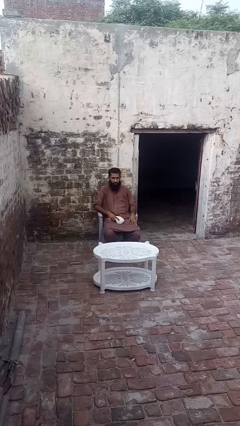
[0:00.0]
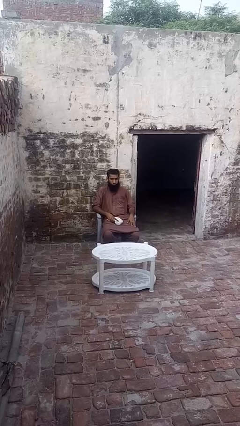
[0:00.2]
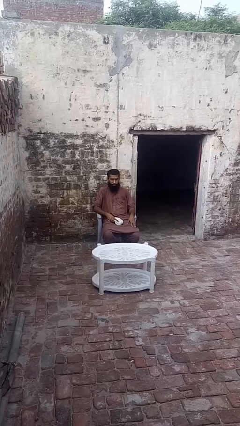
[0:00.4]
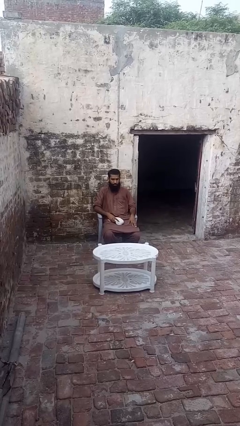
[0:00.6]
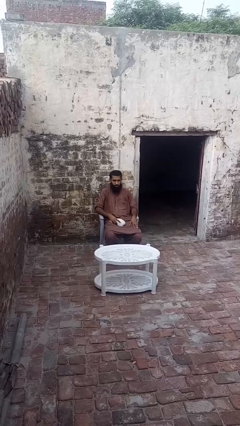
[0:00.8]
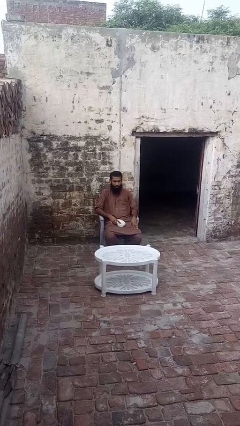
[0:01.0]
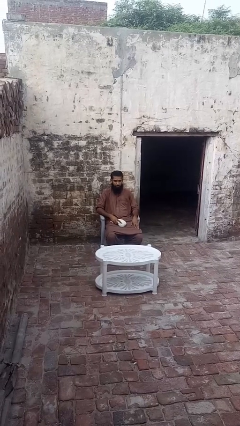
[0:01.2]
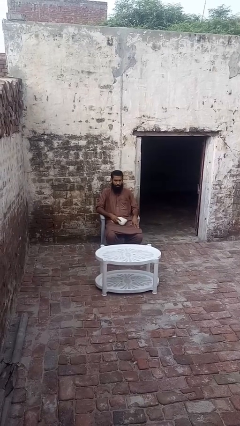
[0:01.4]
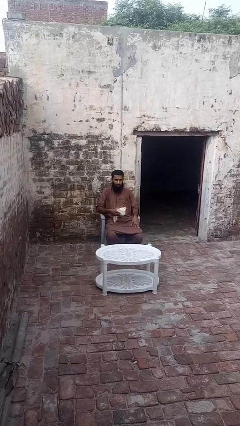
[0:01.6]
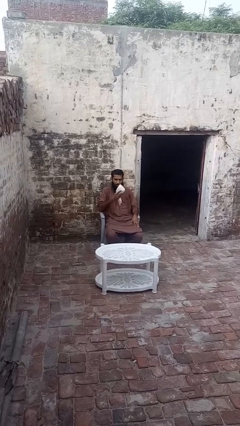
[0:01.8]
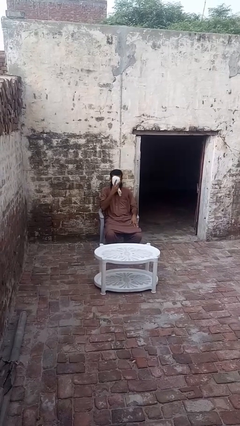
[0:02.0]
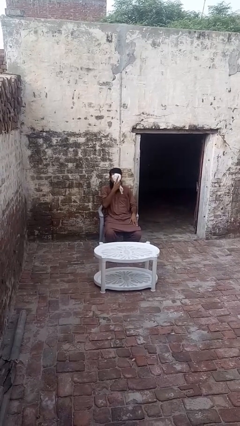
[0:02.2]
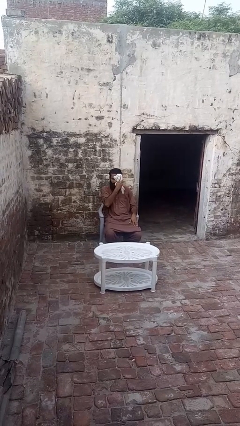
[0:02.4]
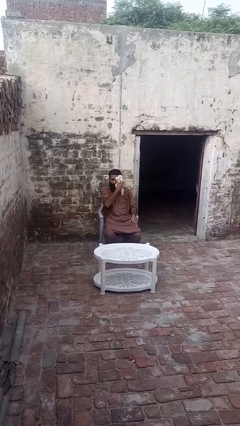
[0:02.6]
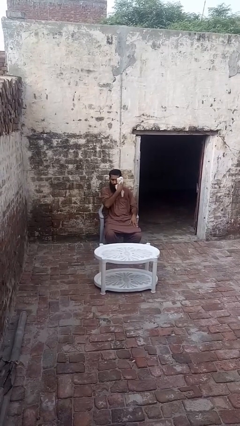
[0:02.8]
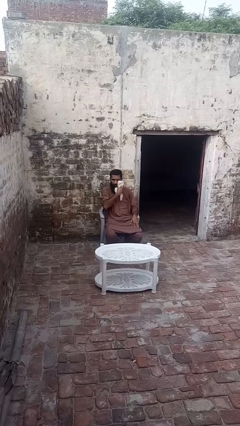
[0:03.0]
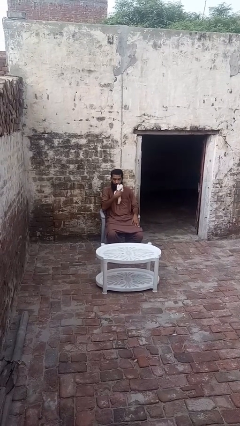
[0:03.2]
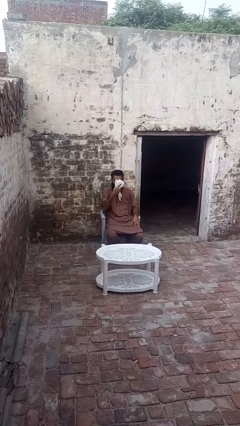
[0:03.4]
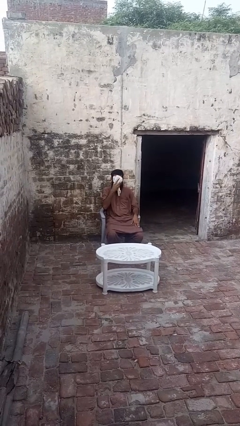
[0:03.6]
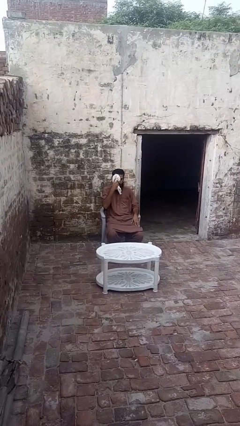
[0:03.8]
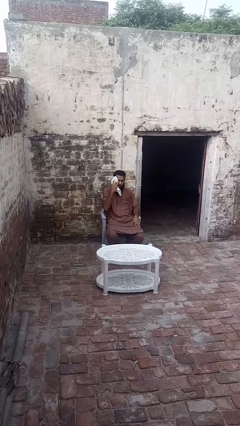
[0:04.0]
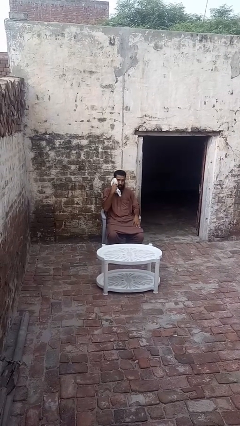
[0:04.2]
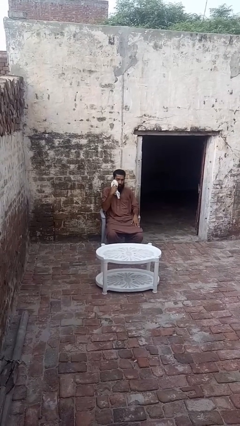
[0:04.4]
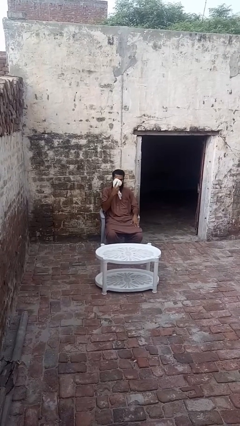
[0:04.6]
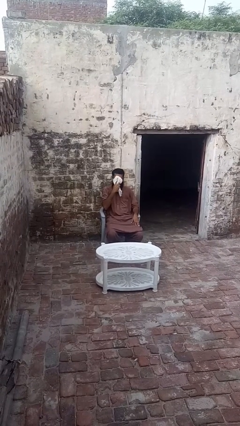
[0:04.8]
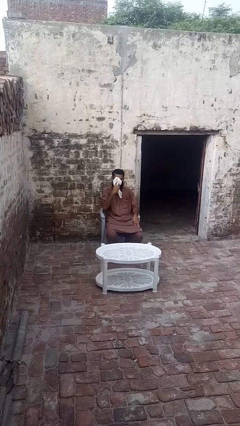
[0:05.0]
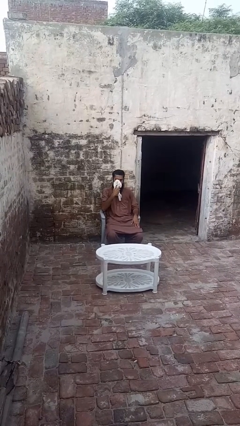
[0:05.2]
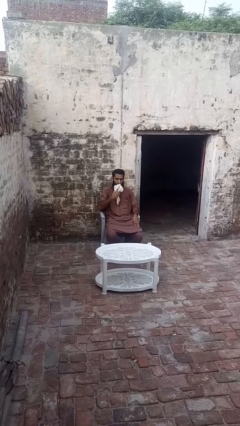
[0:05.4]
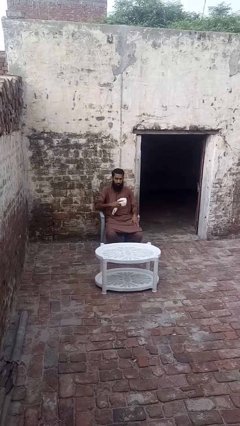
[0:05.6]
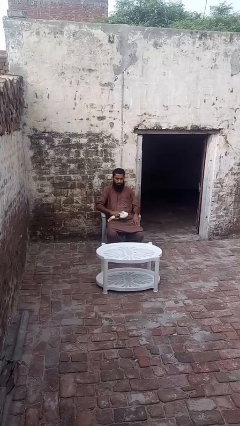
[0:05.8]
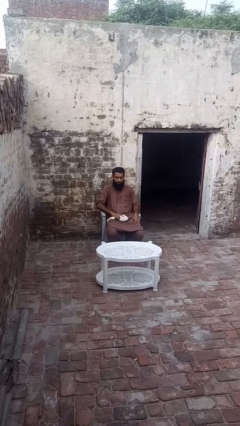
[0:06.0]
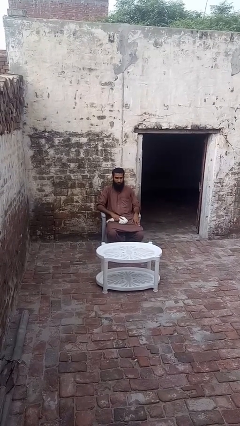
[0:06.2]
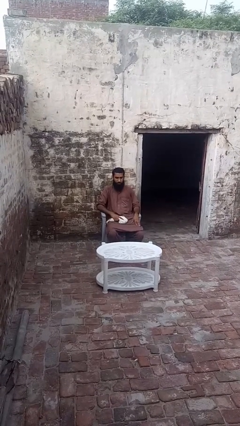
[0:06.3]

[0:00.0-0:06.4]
person wipes mouth with napkin

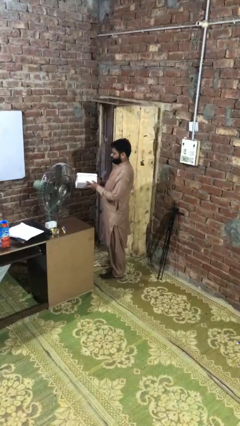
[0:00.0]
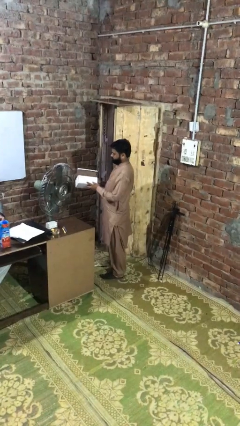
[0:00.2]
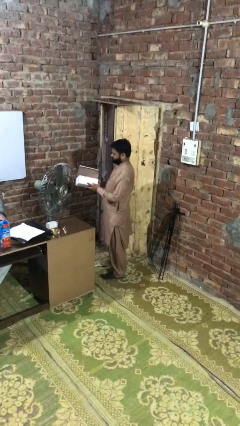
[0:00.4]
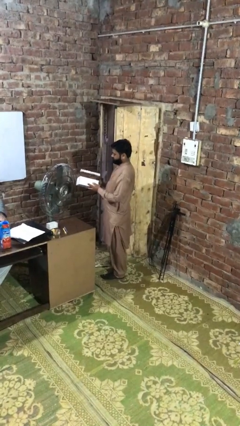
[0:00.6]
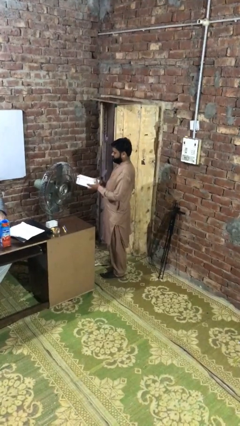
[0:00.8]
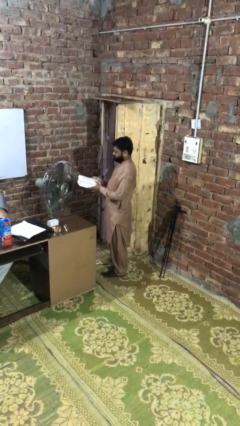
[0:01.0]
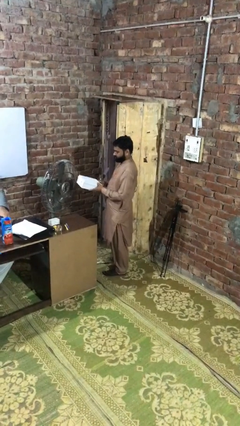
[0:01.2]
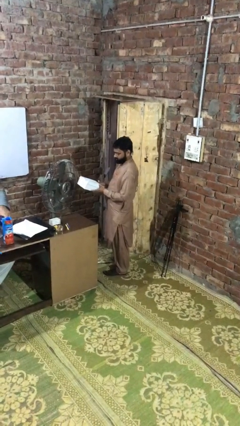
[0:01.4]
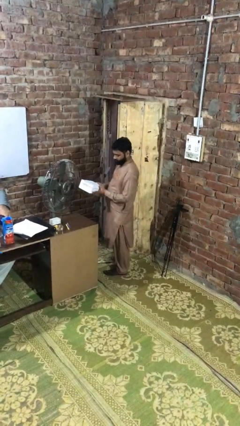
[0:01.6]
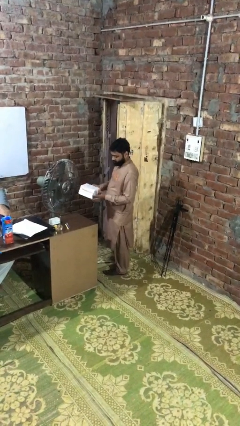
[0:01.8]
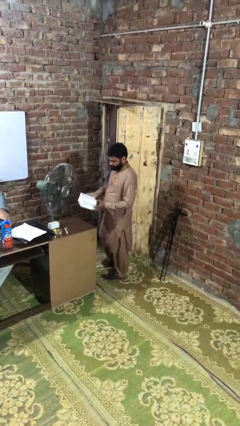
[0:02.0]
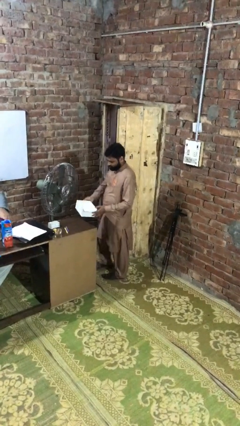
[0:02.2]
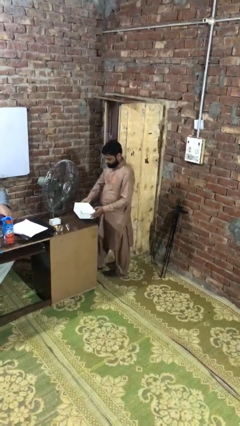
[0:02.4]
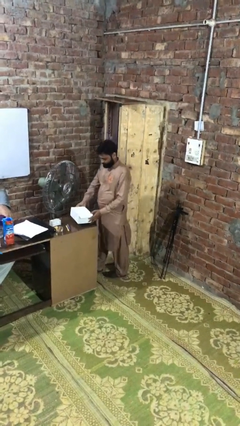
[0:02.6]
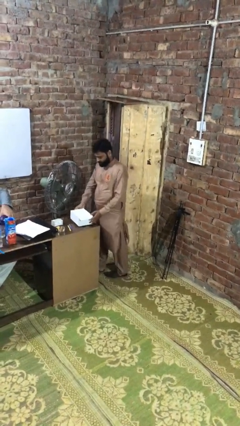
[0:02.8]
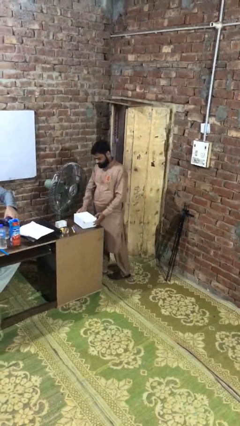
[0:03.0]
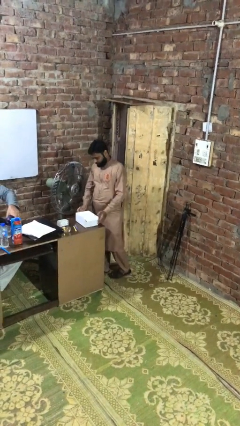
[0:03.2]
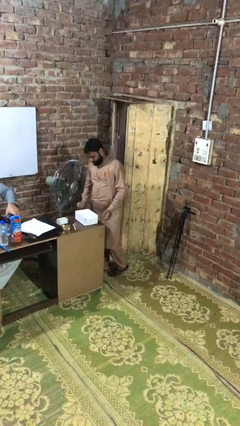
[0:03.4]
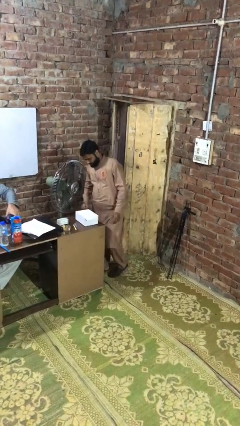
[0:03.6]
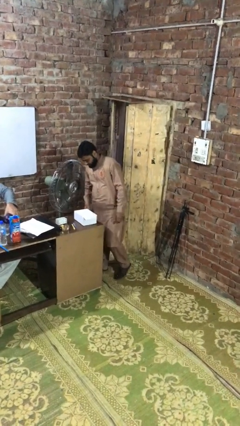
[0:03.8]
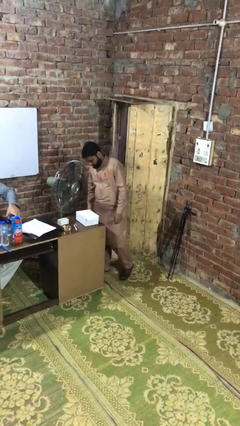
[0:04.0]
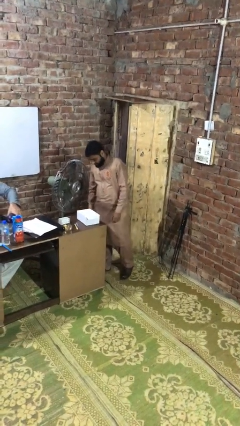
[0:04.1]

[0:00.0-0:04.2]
person puts down object on table

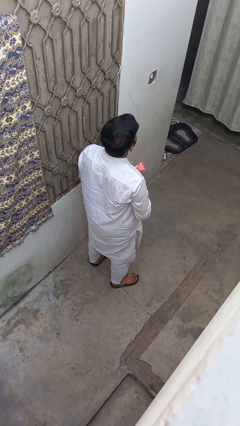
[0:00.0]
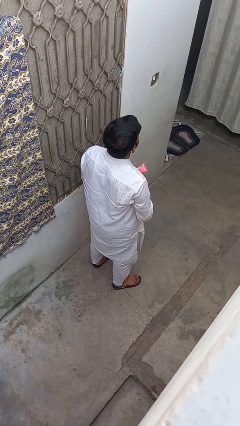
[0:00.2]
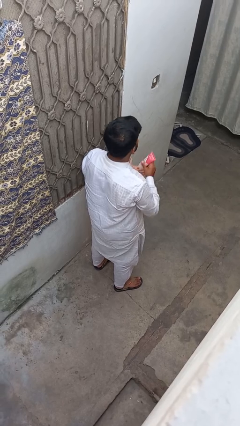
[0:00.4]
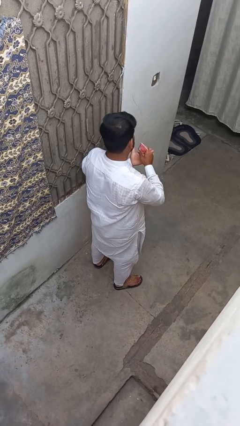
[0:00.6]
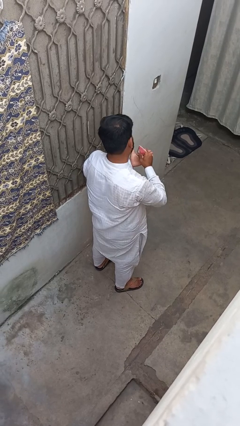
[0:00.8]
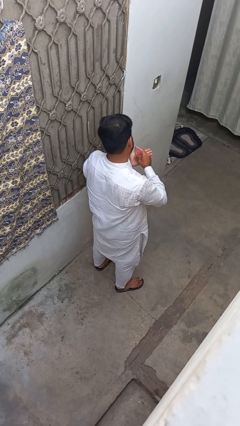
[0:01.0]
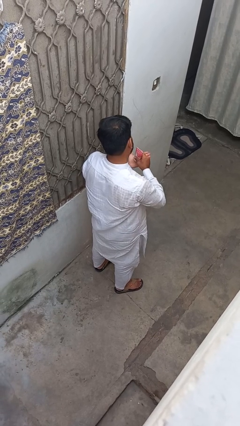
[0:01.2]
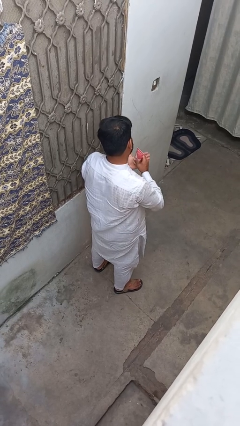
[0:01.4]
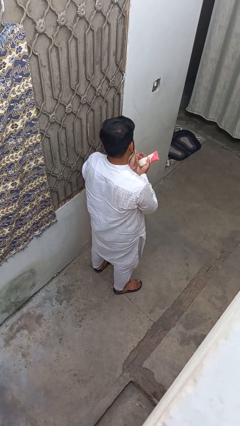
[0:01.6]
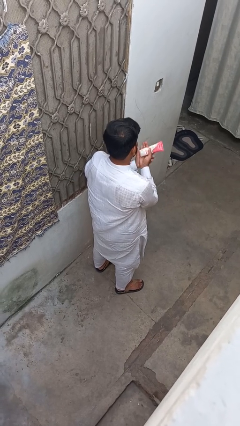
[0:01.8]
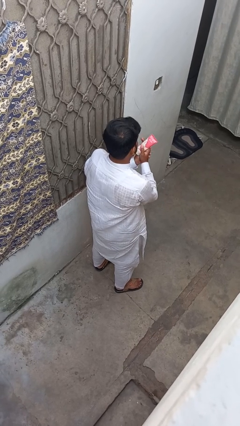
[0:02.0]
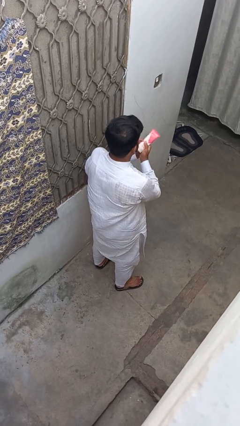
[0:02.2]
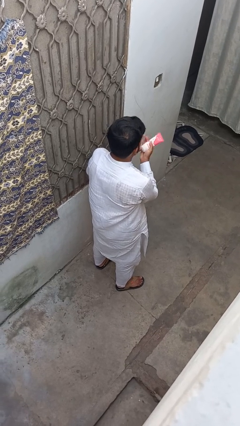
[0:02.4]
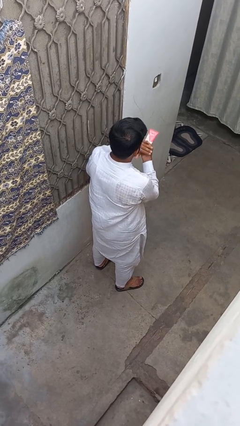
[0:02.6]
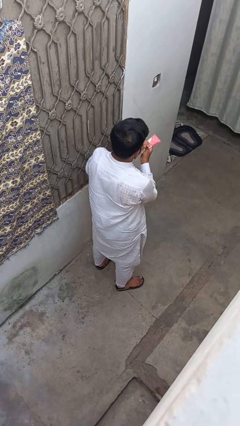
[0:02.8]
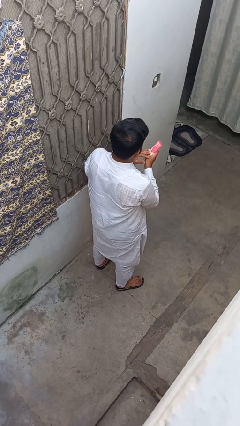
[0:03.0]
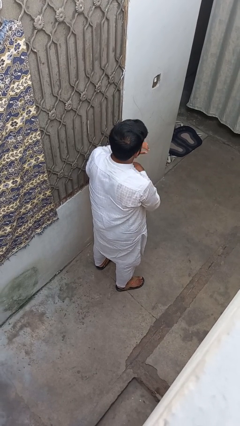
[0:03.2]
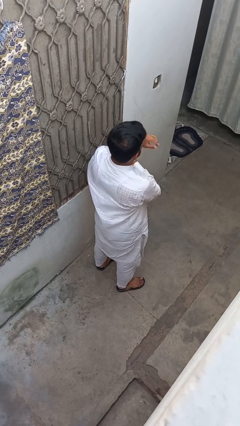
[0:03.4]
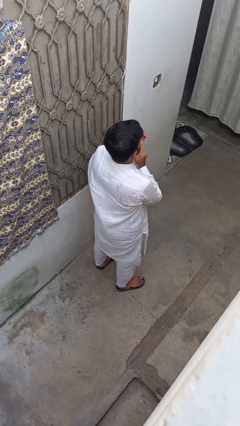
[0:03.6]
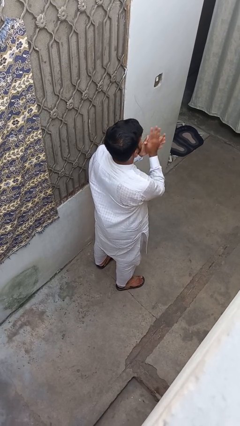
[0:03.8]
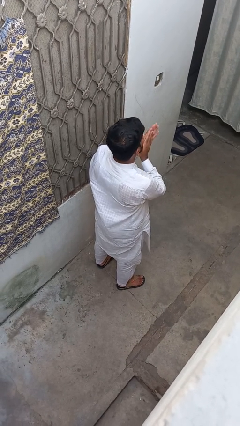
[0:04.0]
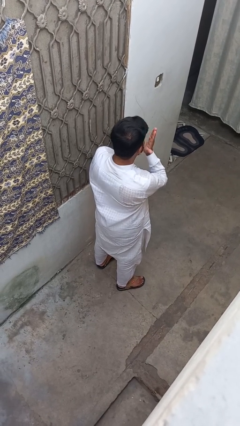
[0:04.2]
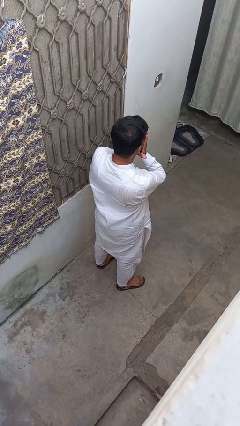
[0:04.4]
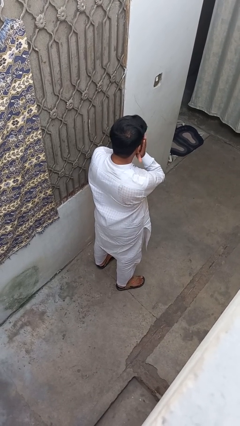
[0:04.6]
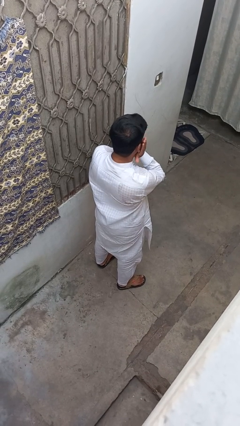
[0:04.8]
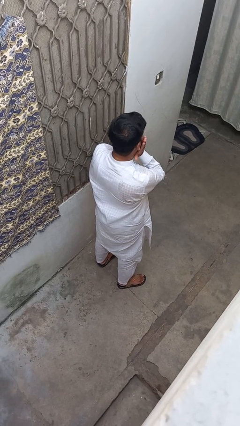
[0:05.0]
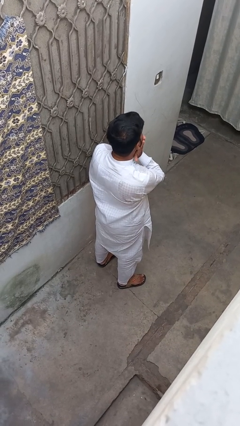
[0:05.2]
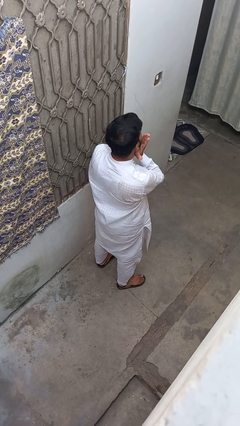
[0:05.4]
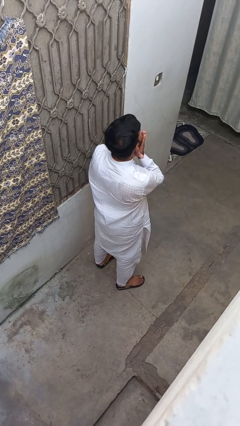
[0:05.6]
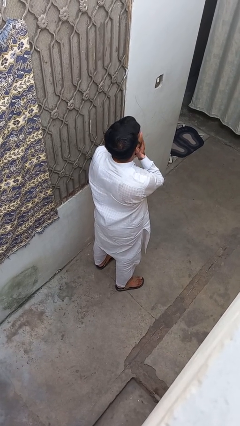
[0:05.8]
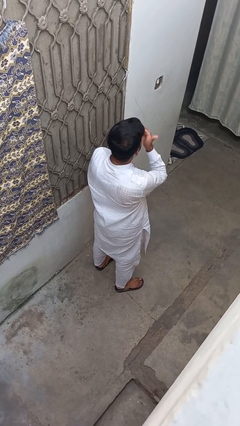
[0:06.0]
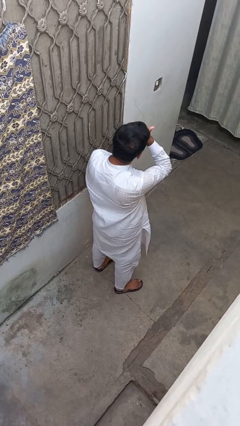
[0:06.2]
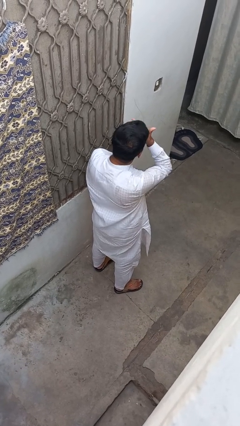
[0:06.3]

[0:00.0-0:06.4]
person applies facial moisturizer

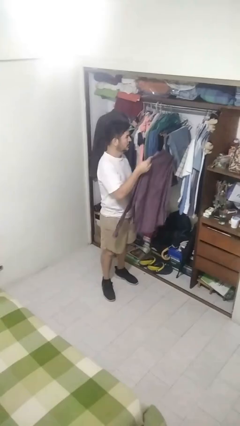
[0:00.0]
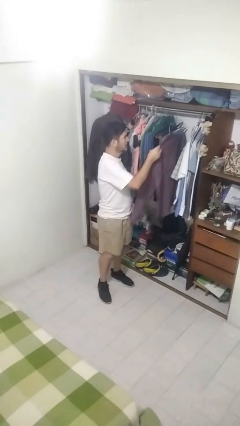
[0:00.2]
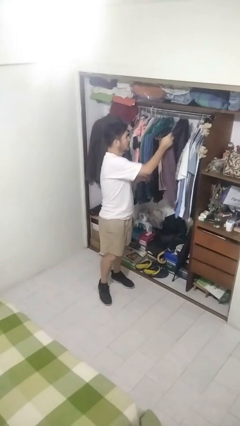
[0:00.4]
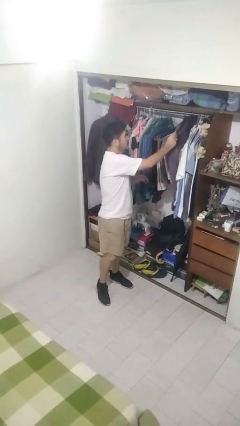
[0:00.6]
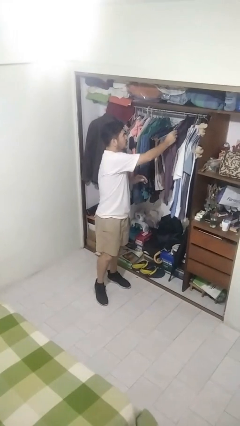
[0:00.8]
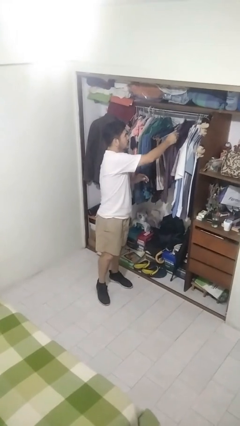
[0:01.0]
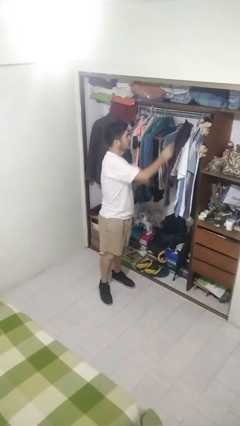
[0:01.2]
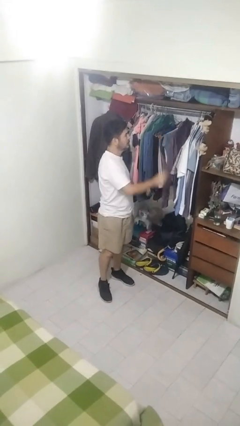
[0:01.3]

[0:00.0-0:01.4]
person puts clothes into closet
